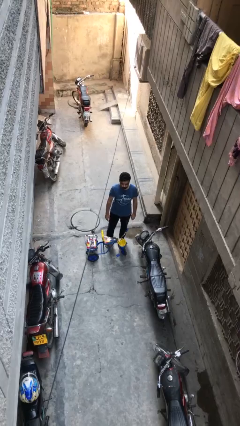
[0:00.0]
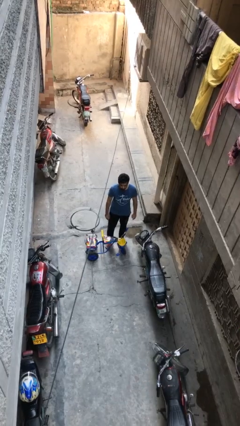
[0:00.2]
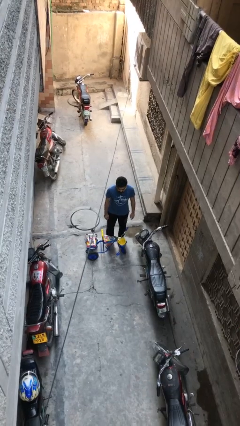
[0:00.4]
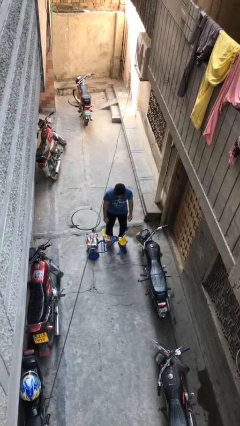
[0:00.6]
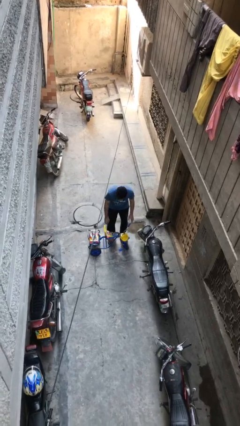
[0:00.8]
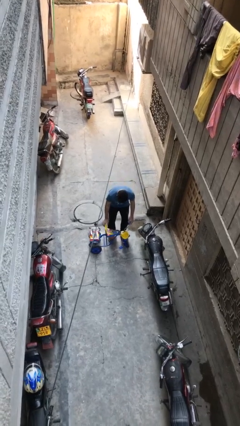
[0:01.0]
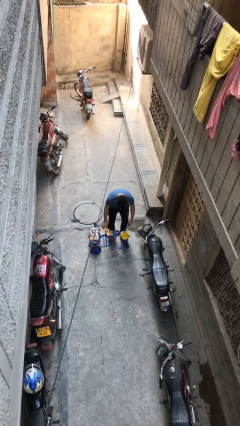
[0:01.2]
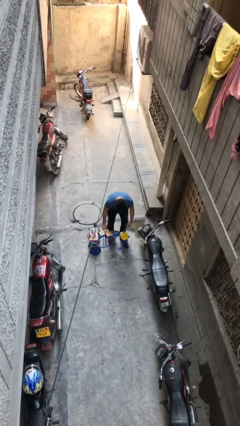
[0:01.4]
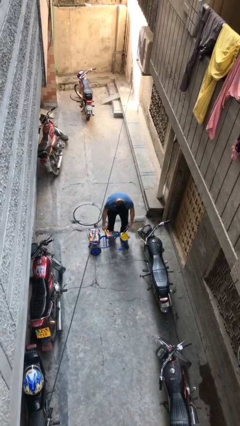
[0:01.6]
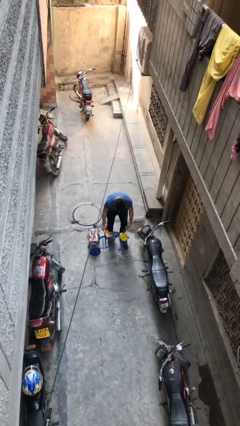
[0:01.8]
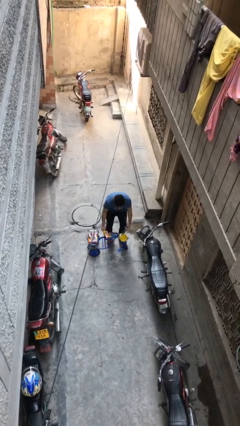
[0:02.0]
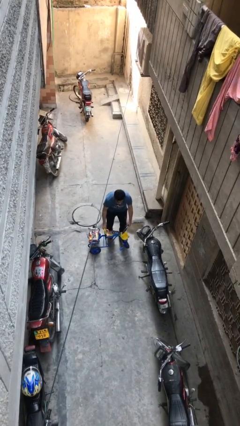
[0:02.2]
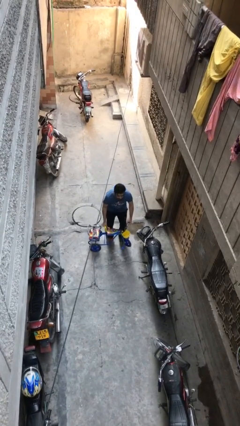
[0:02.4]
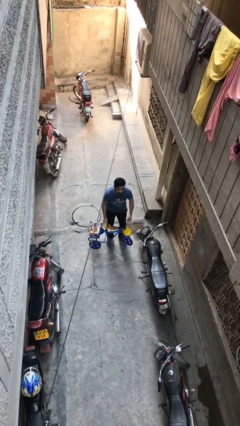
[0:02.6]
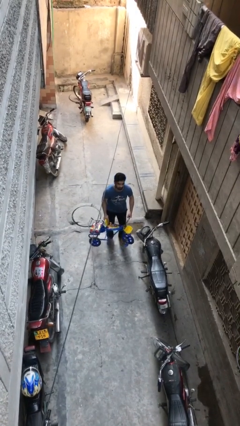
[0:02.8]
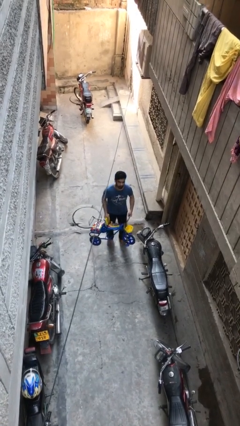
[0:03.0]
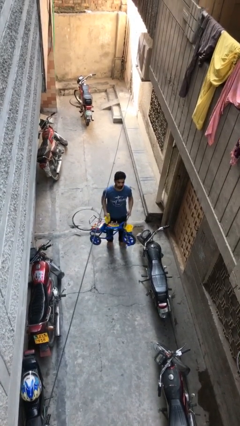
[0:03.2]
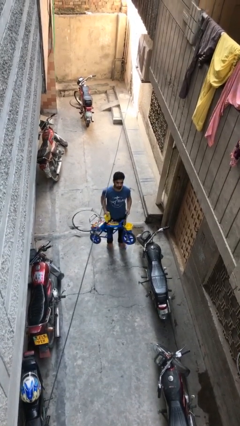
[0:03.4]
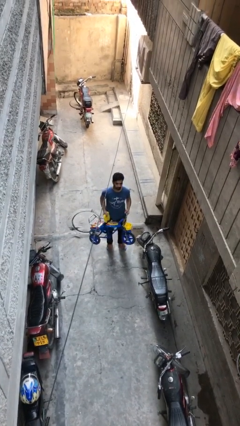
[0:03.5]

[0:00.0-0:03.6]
person picks up object from floor

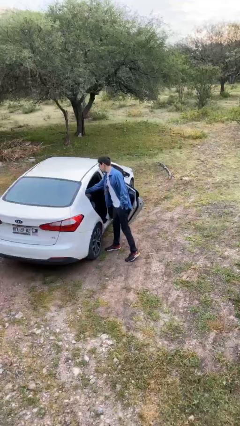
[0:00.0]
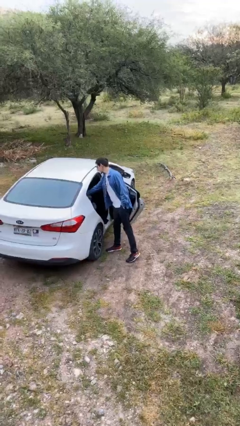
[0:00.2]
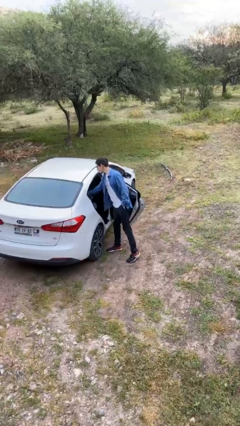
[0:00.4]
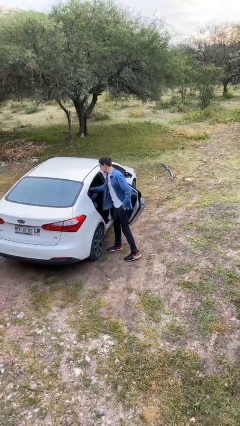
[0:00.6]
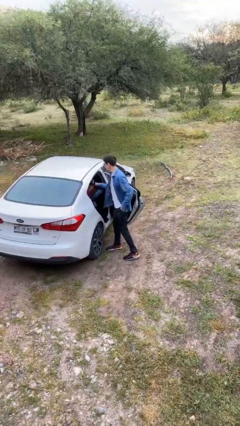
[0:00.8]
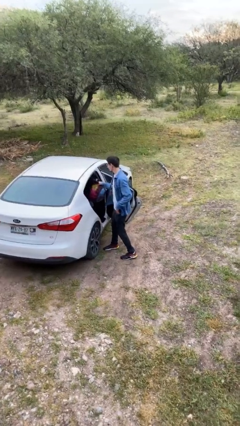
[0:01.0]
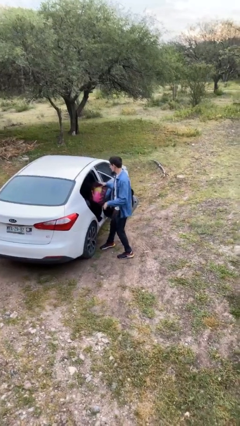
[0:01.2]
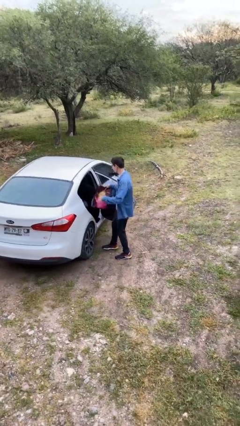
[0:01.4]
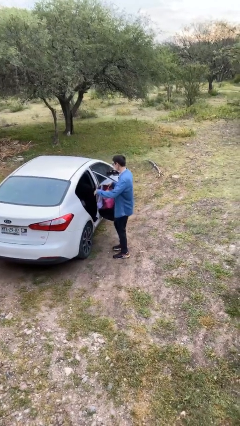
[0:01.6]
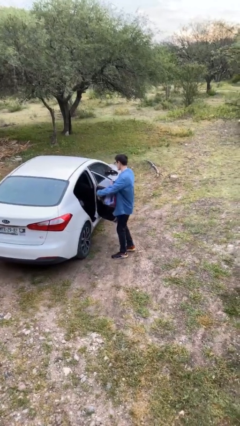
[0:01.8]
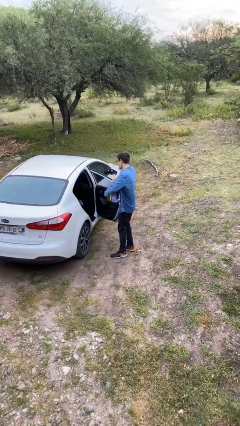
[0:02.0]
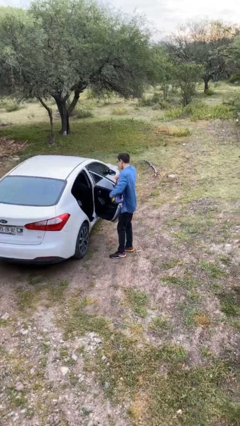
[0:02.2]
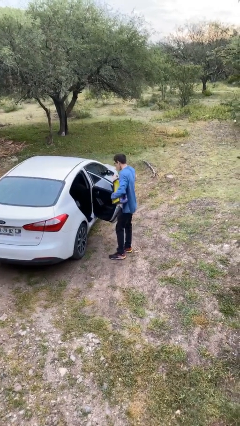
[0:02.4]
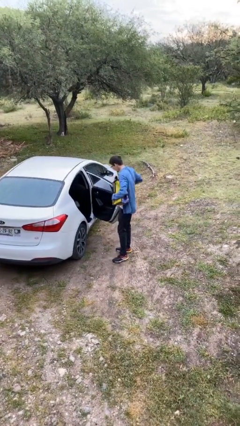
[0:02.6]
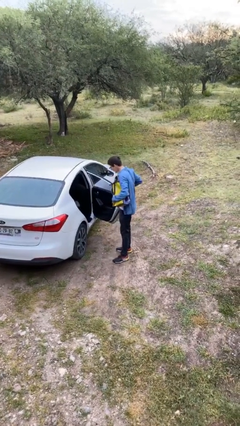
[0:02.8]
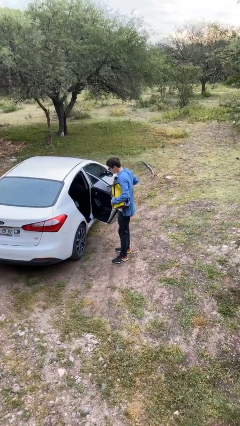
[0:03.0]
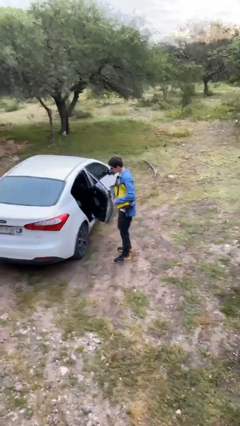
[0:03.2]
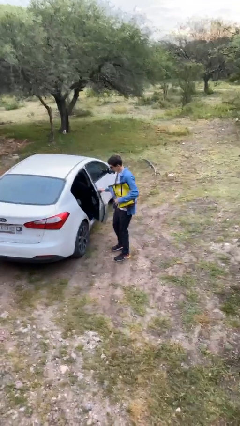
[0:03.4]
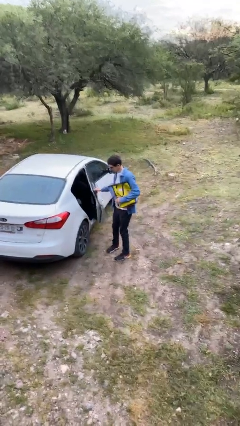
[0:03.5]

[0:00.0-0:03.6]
person unloads car

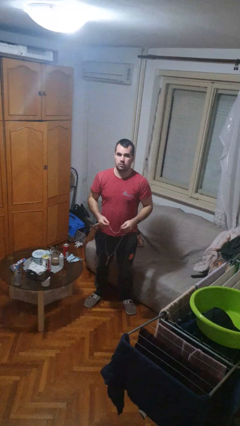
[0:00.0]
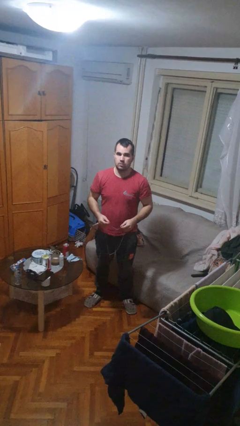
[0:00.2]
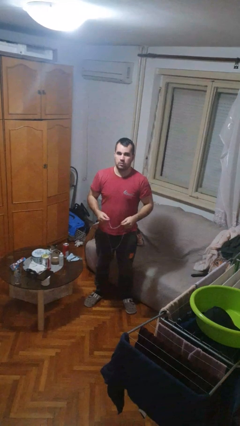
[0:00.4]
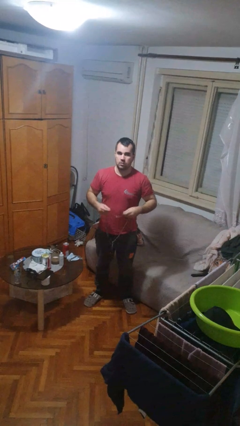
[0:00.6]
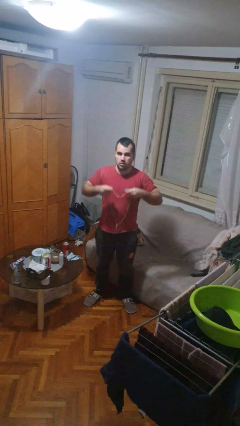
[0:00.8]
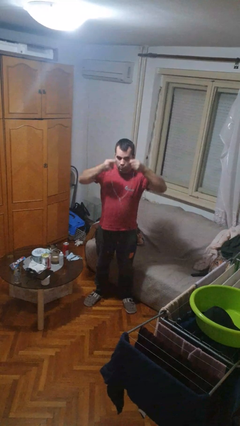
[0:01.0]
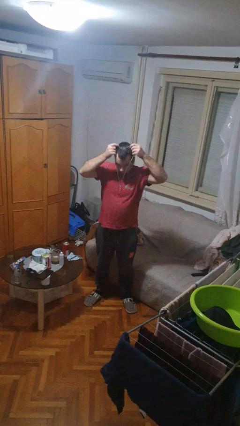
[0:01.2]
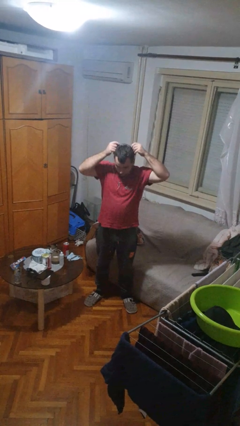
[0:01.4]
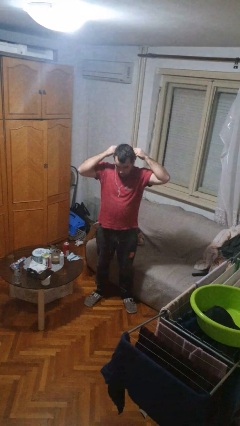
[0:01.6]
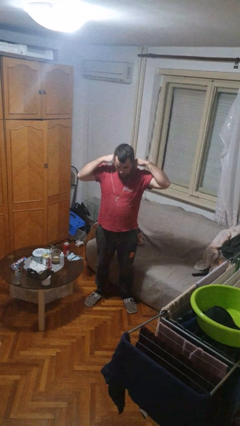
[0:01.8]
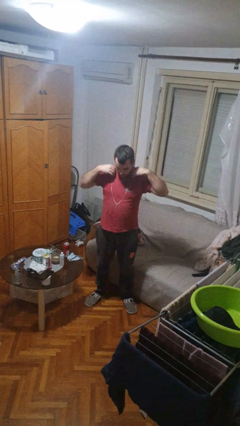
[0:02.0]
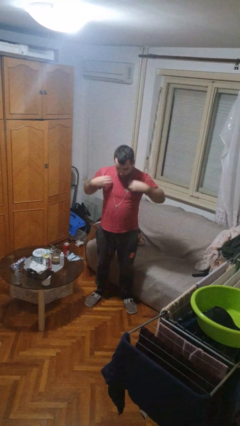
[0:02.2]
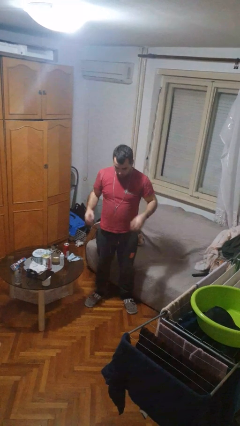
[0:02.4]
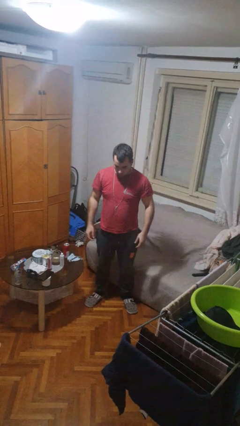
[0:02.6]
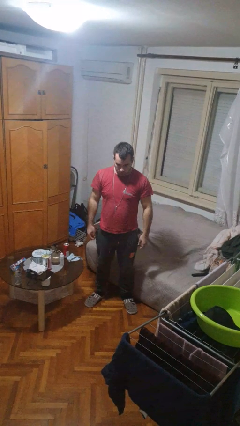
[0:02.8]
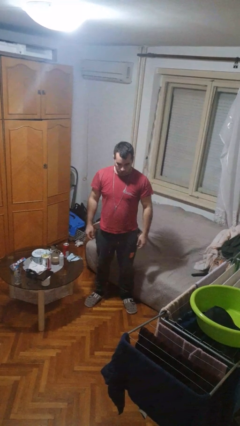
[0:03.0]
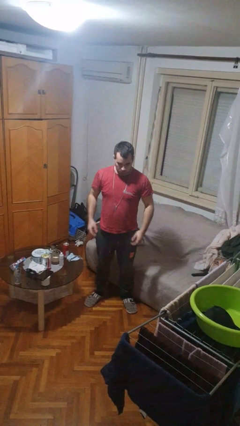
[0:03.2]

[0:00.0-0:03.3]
person puts on necklace

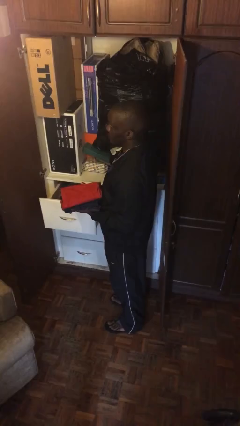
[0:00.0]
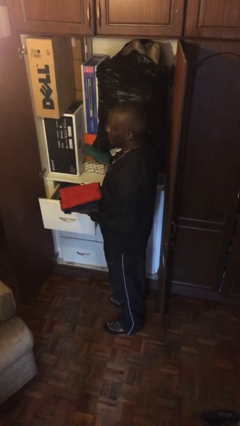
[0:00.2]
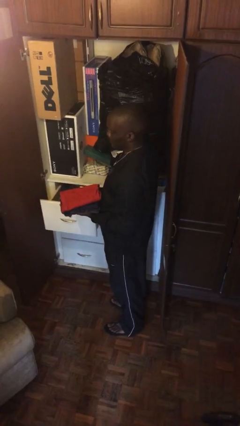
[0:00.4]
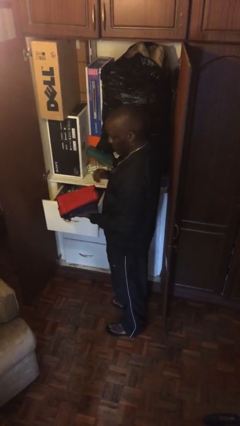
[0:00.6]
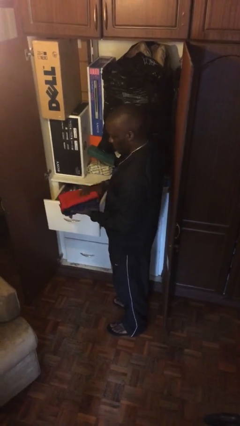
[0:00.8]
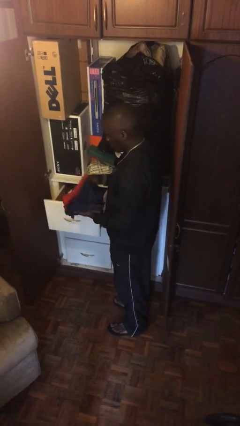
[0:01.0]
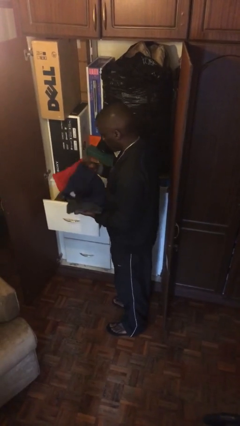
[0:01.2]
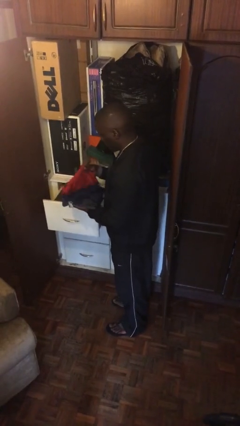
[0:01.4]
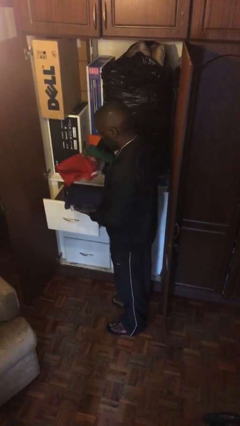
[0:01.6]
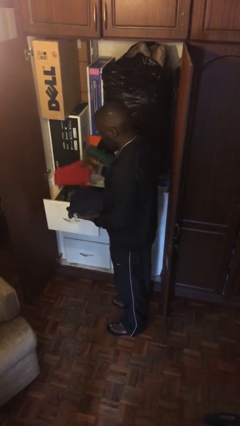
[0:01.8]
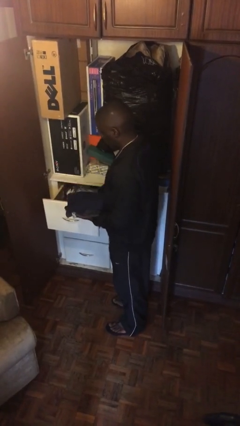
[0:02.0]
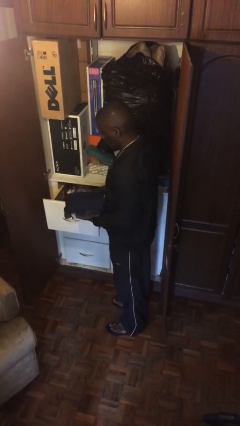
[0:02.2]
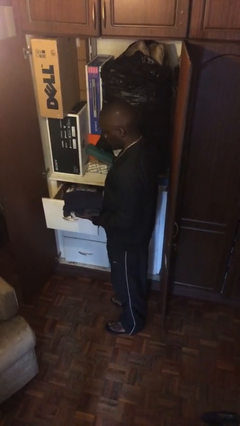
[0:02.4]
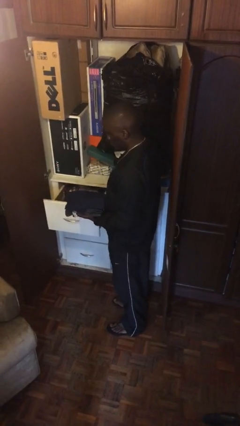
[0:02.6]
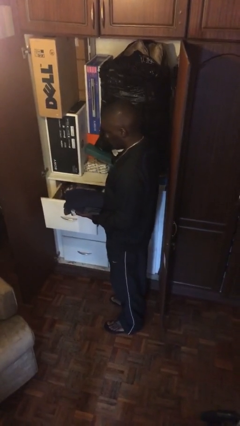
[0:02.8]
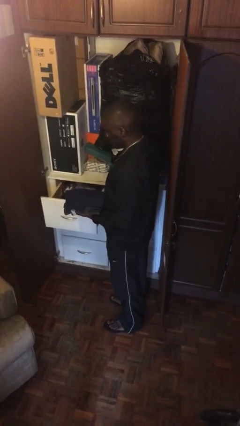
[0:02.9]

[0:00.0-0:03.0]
person puts clothes into dresser

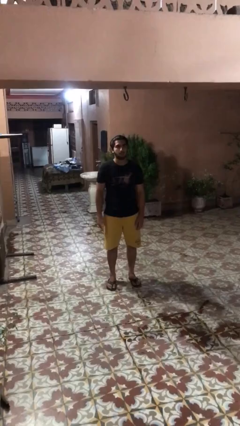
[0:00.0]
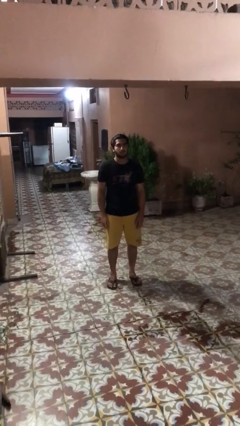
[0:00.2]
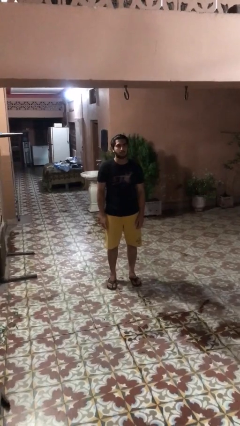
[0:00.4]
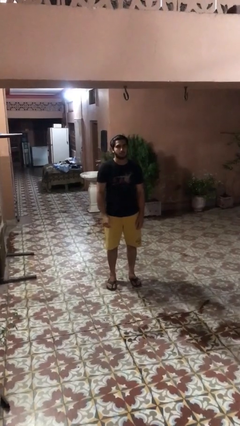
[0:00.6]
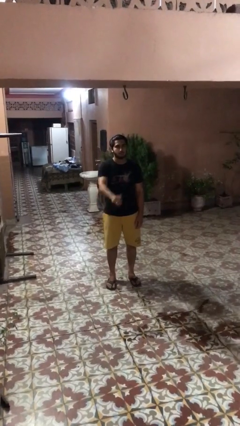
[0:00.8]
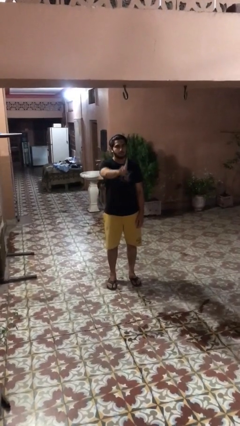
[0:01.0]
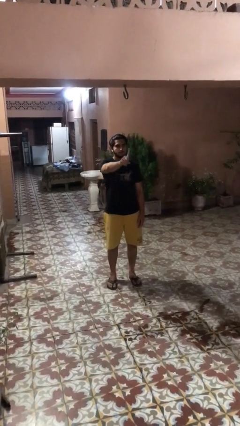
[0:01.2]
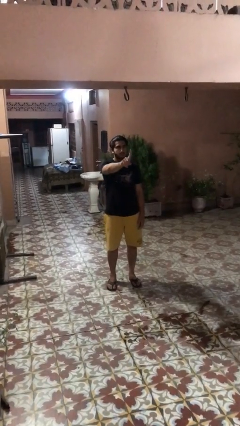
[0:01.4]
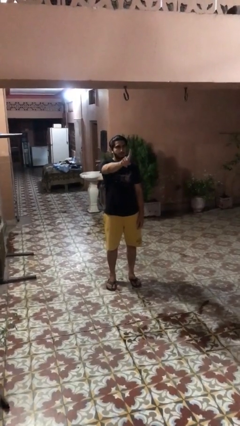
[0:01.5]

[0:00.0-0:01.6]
person gestures number one

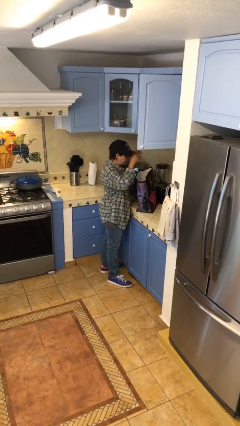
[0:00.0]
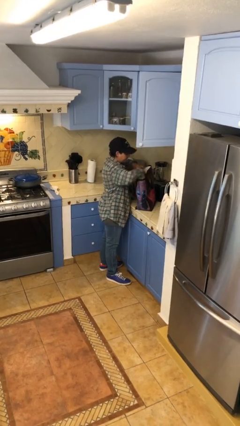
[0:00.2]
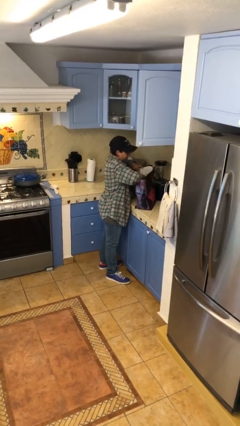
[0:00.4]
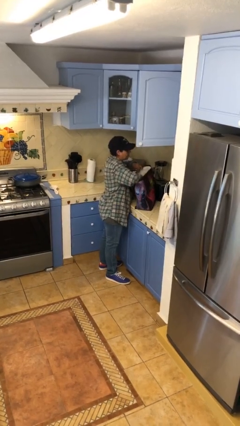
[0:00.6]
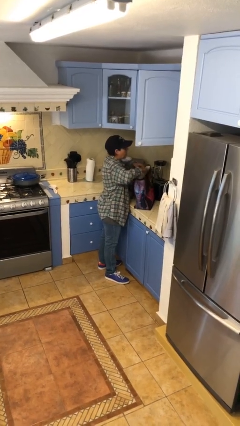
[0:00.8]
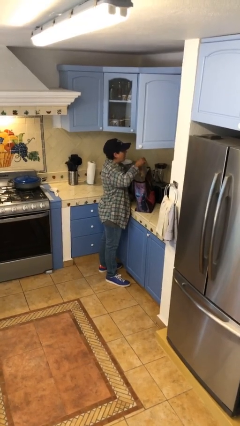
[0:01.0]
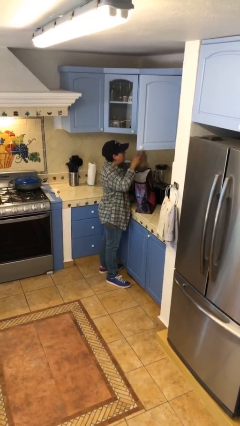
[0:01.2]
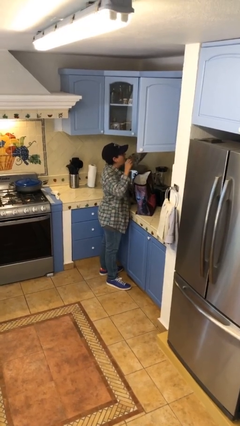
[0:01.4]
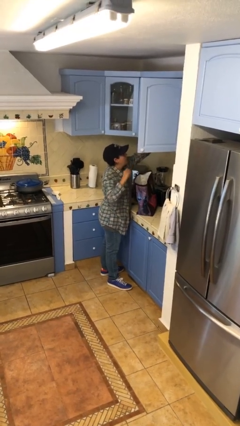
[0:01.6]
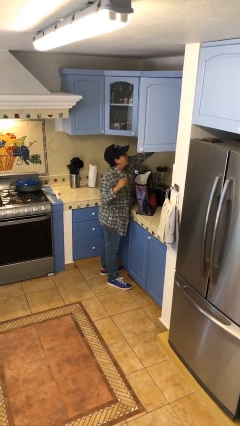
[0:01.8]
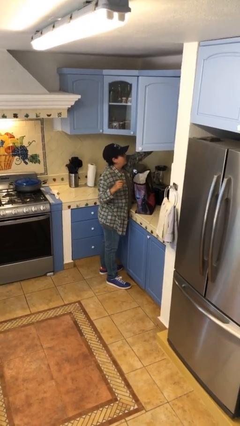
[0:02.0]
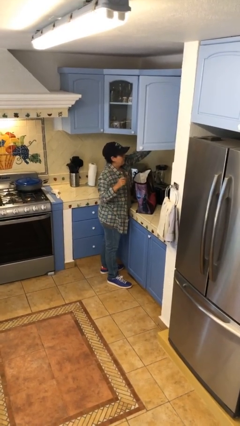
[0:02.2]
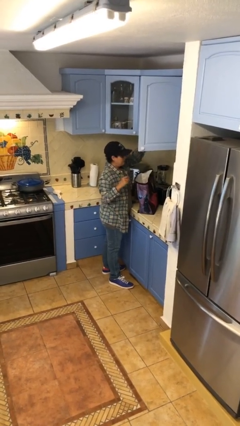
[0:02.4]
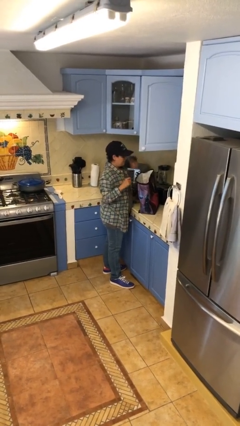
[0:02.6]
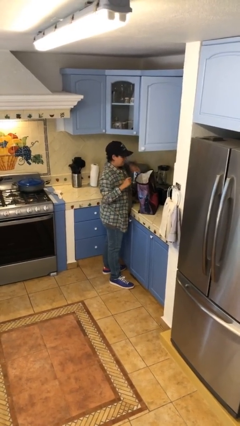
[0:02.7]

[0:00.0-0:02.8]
person loads groceries into cabinet
